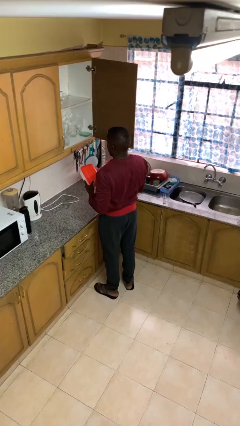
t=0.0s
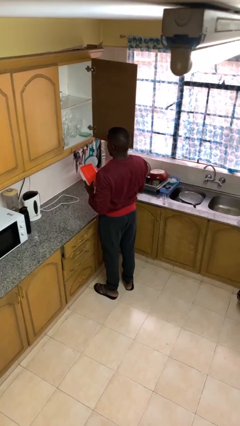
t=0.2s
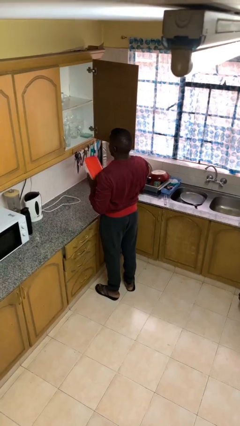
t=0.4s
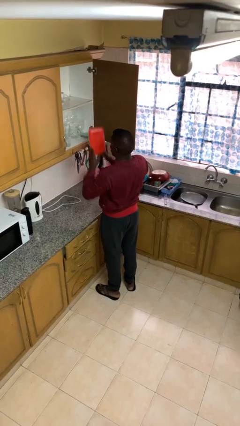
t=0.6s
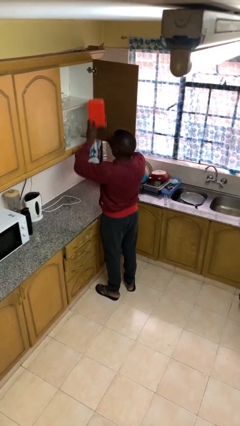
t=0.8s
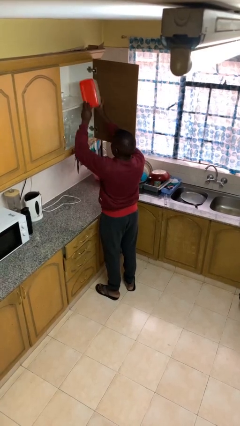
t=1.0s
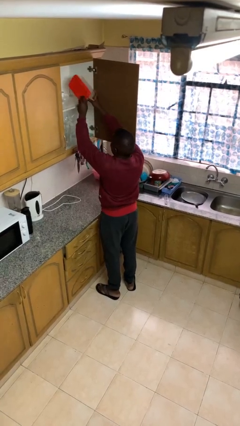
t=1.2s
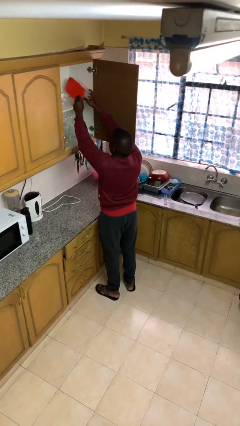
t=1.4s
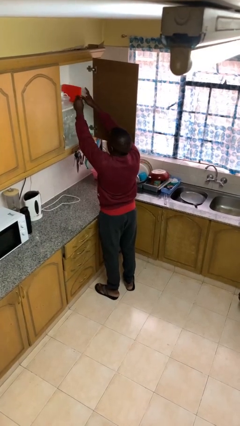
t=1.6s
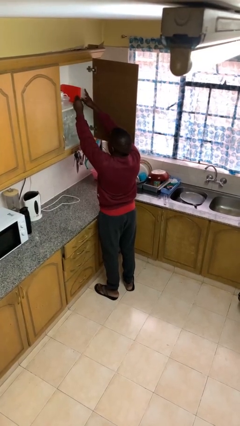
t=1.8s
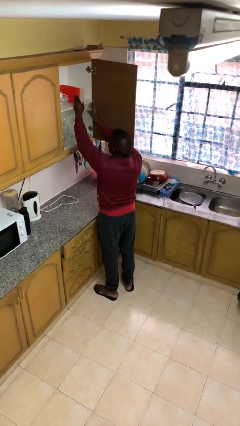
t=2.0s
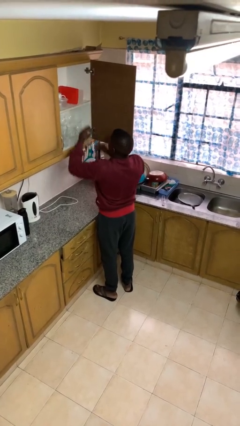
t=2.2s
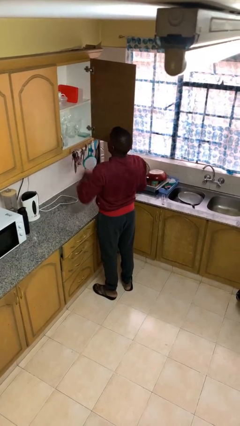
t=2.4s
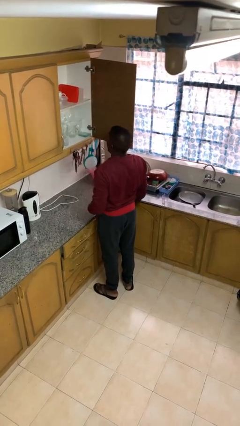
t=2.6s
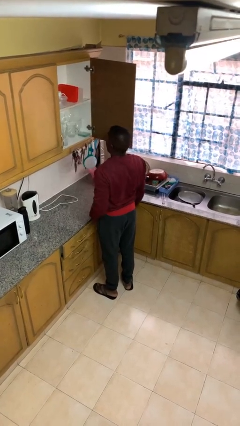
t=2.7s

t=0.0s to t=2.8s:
person puts down object into cabinet

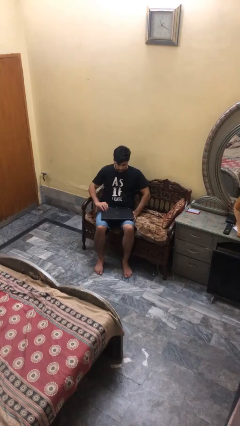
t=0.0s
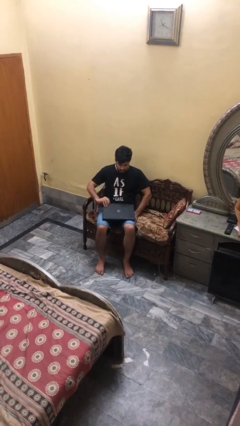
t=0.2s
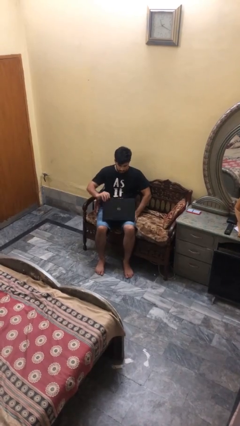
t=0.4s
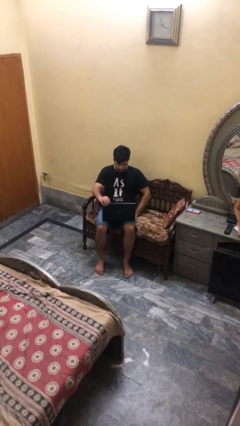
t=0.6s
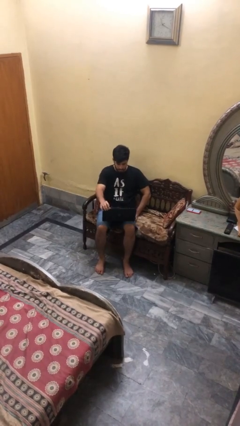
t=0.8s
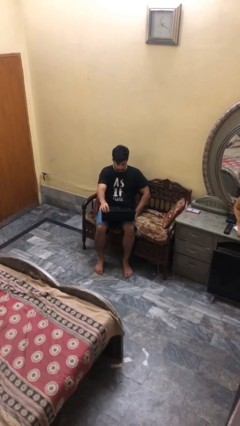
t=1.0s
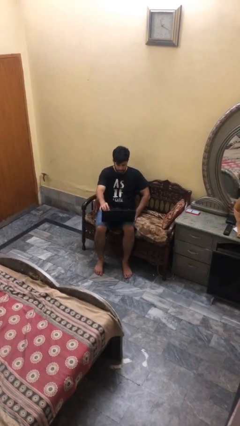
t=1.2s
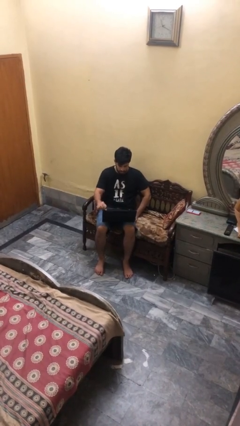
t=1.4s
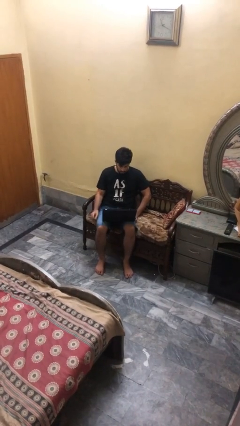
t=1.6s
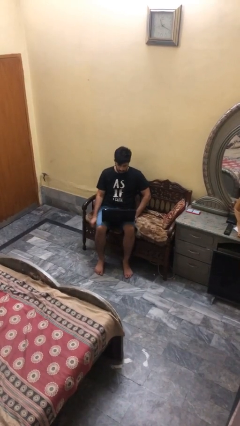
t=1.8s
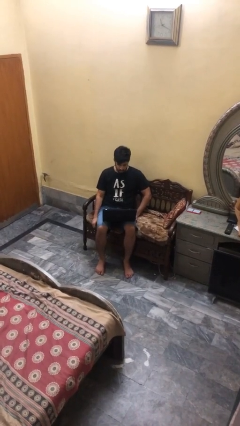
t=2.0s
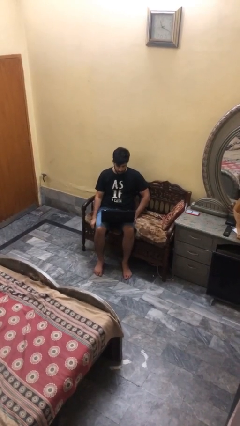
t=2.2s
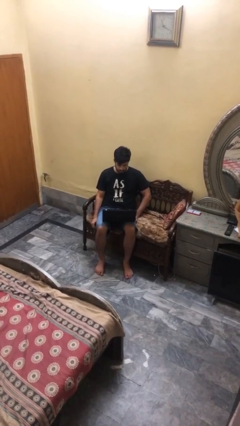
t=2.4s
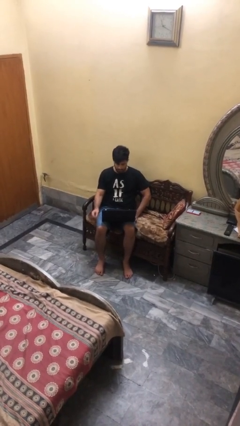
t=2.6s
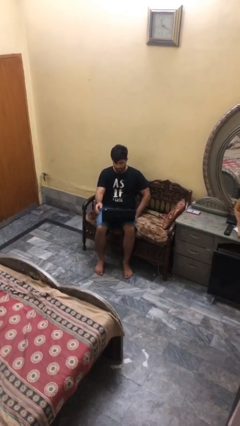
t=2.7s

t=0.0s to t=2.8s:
person opens laptop

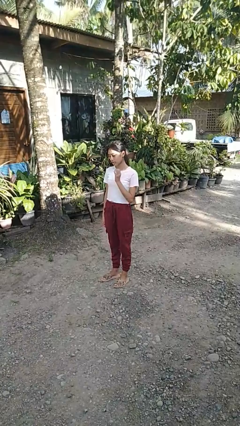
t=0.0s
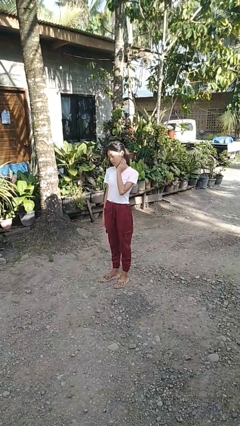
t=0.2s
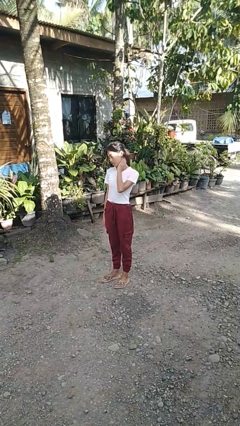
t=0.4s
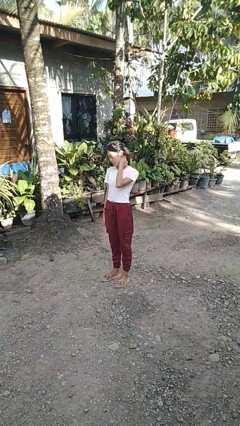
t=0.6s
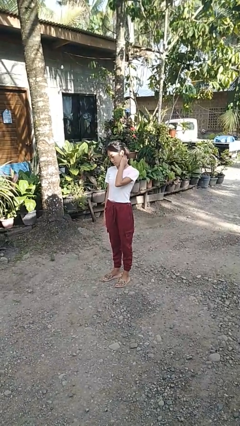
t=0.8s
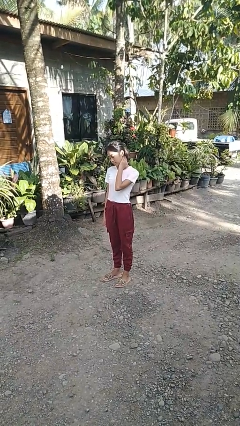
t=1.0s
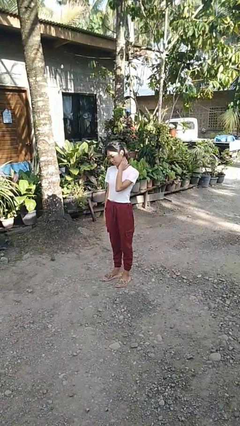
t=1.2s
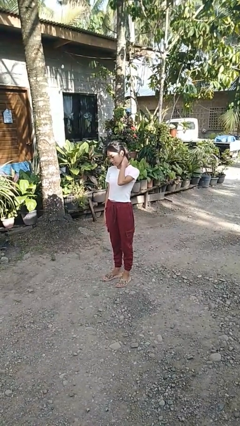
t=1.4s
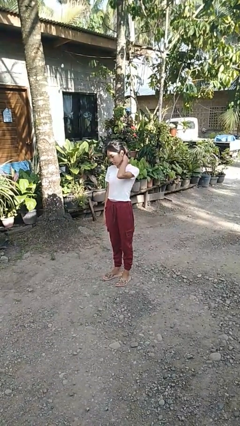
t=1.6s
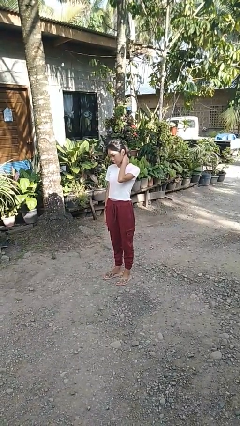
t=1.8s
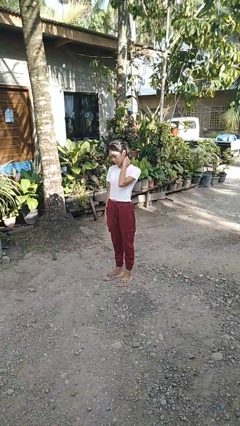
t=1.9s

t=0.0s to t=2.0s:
person rubs neck

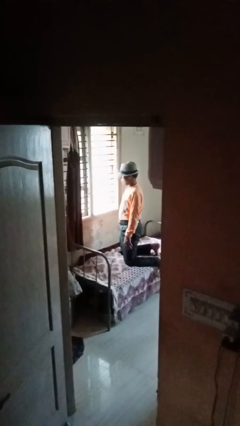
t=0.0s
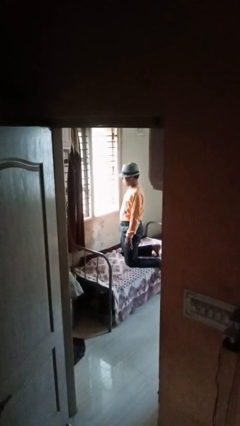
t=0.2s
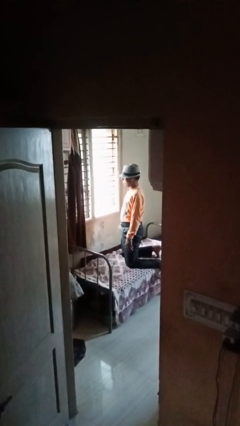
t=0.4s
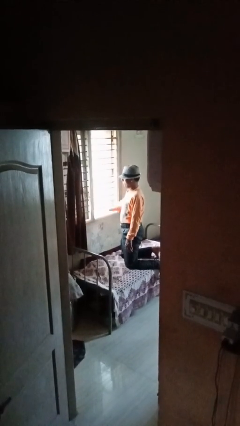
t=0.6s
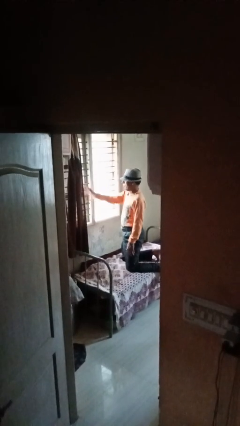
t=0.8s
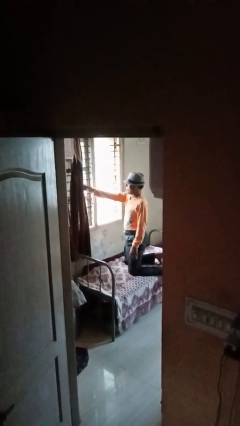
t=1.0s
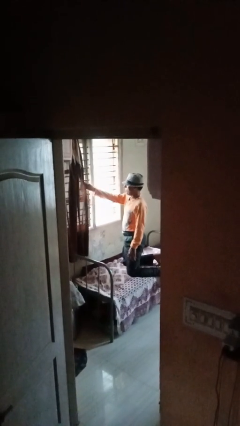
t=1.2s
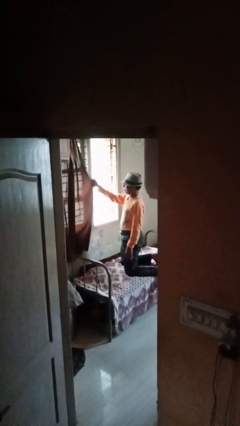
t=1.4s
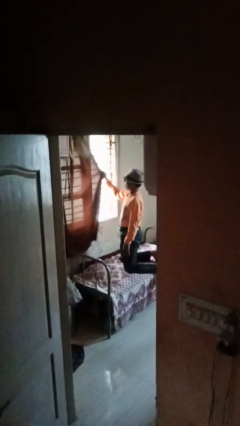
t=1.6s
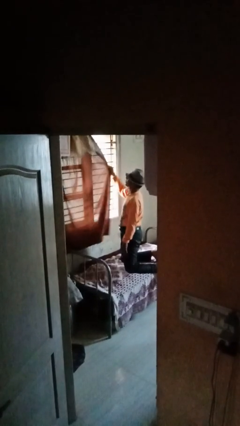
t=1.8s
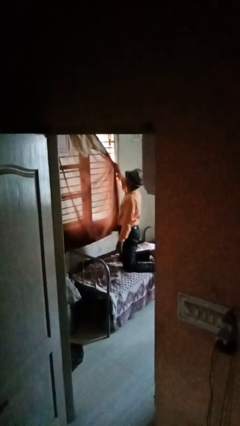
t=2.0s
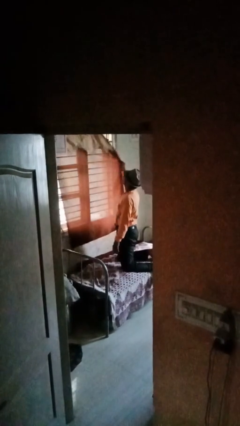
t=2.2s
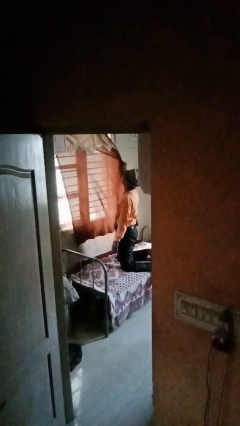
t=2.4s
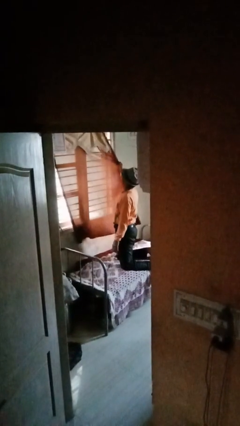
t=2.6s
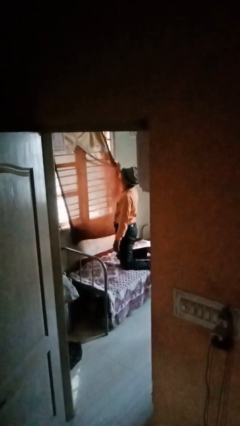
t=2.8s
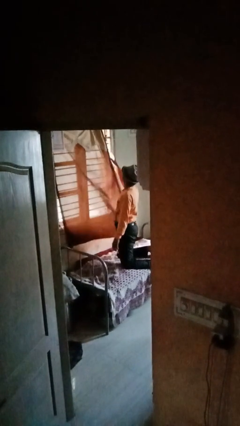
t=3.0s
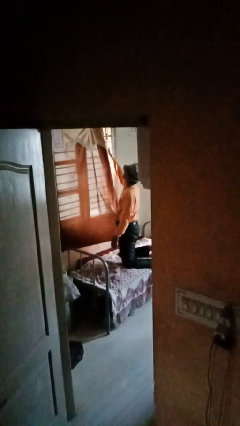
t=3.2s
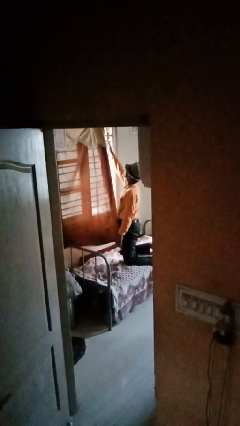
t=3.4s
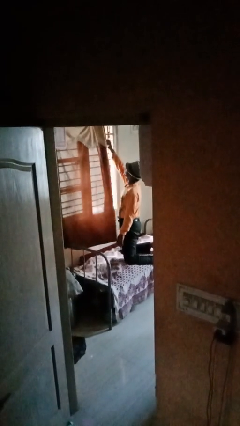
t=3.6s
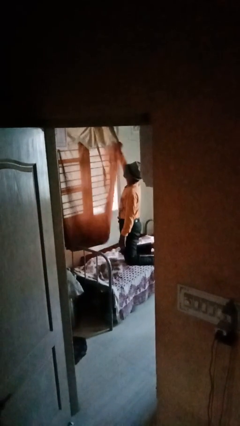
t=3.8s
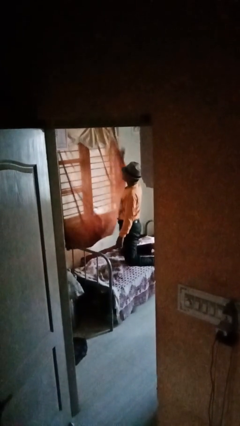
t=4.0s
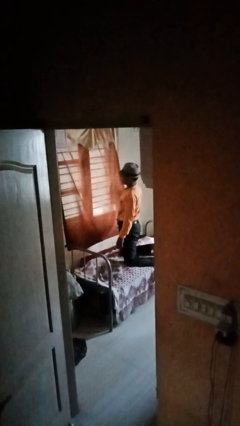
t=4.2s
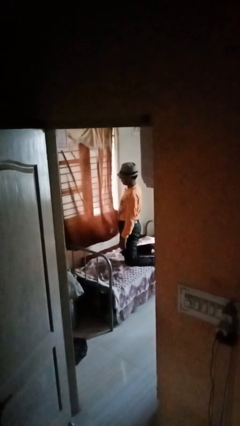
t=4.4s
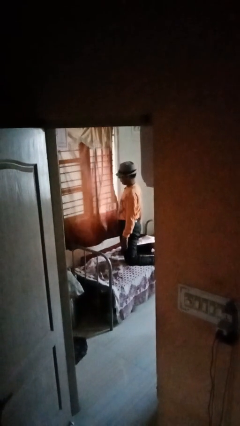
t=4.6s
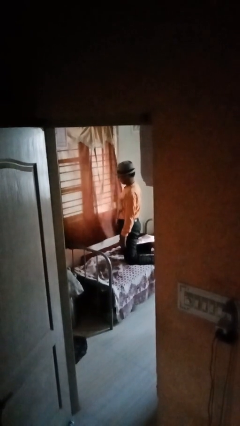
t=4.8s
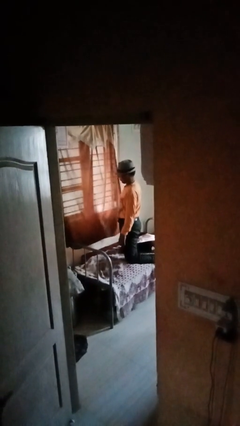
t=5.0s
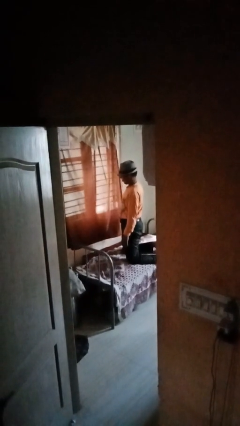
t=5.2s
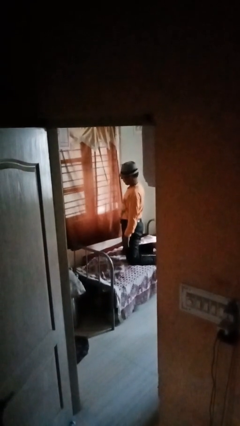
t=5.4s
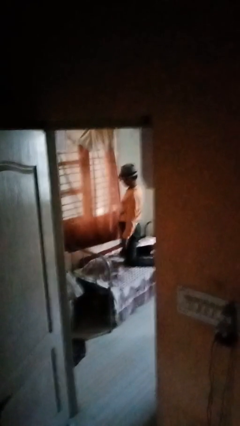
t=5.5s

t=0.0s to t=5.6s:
person closes curtains

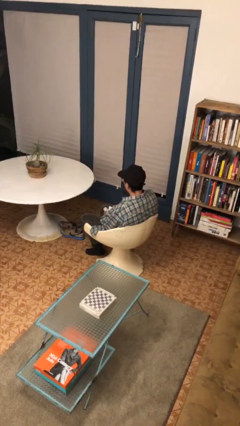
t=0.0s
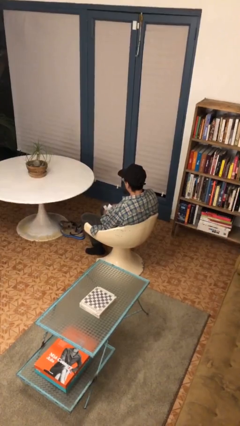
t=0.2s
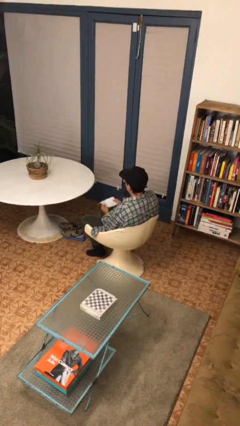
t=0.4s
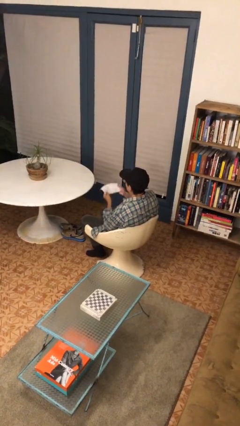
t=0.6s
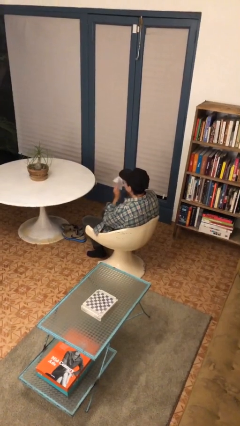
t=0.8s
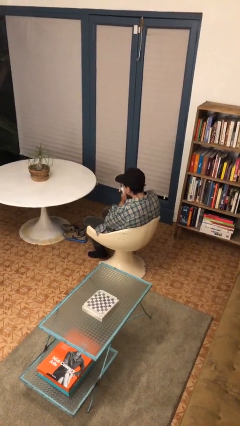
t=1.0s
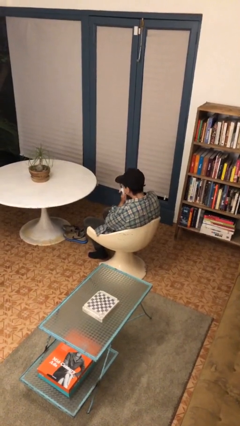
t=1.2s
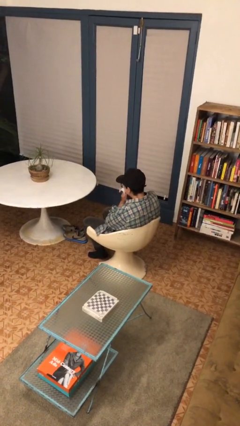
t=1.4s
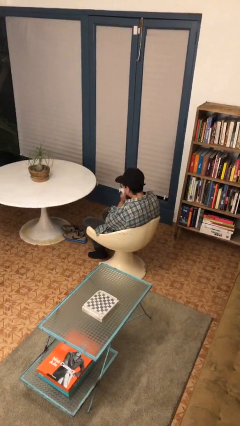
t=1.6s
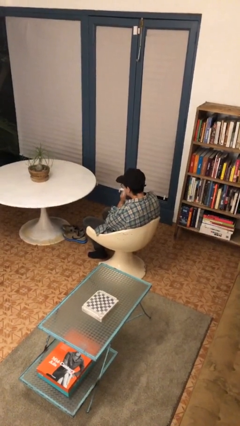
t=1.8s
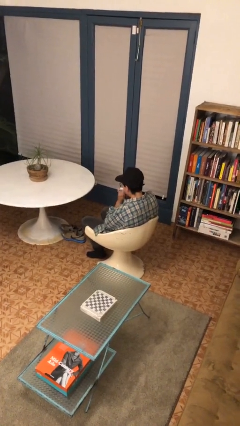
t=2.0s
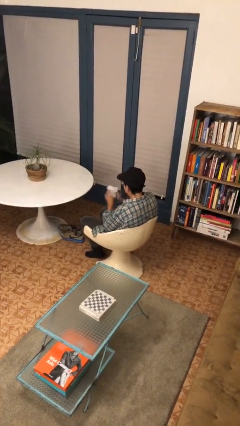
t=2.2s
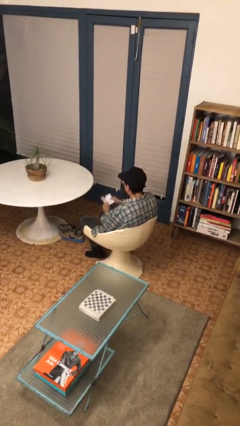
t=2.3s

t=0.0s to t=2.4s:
person blows nose

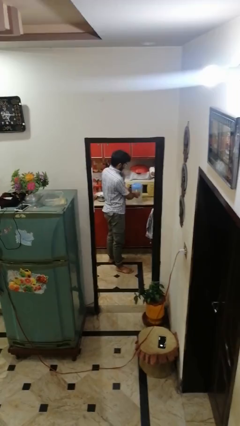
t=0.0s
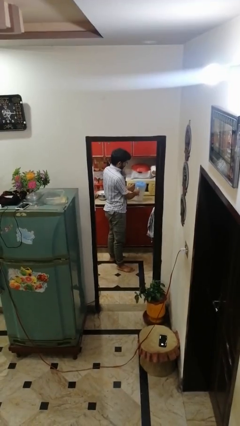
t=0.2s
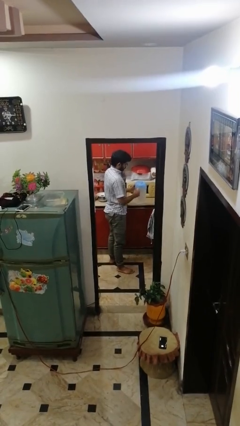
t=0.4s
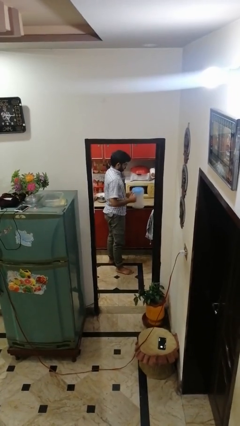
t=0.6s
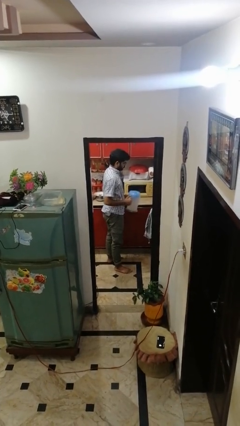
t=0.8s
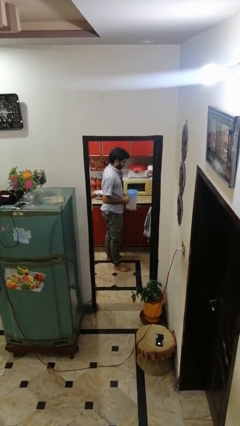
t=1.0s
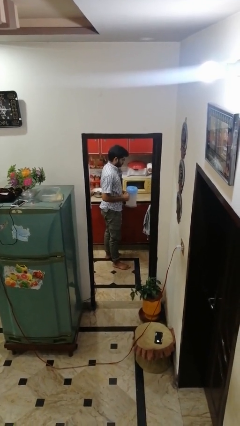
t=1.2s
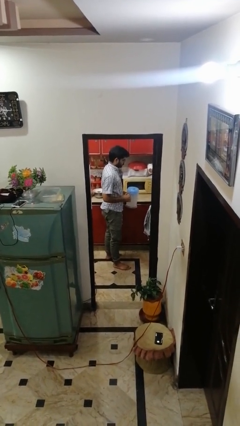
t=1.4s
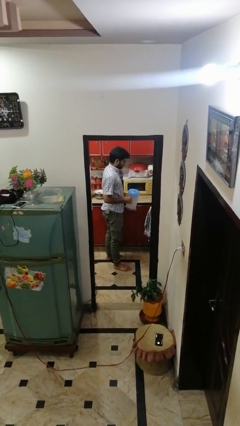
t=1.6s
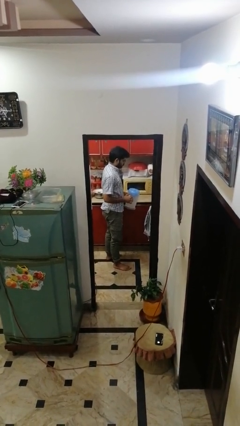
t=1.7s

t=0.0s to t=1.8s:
person picks up object from countertop
